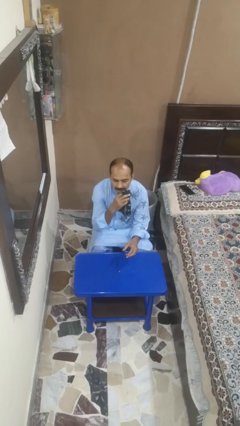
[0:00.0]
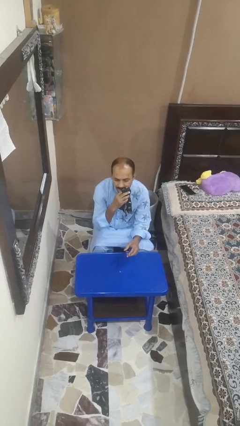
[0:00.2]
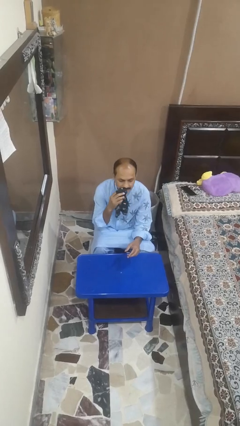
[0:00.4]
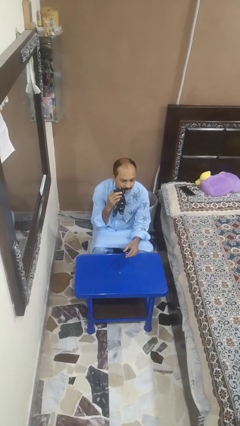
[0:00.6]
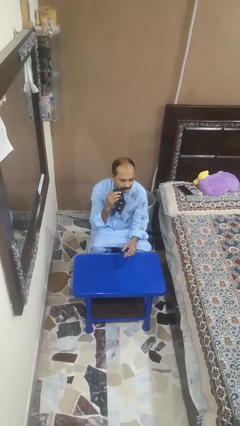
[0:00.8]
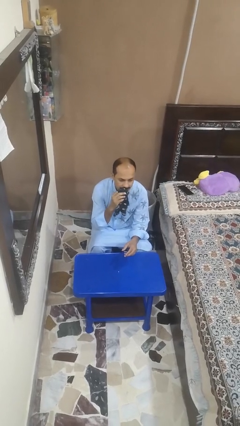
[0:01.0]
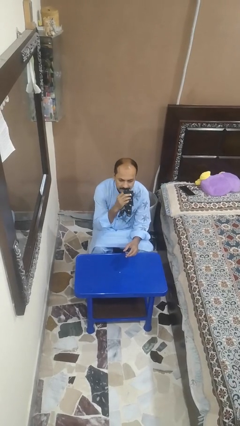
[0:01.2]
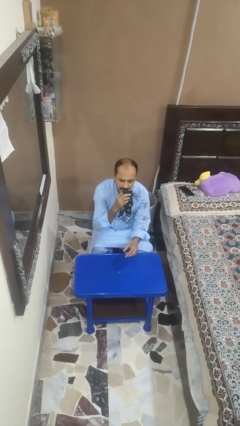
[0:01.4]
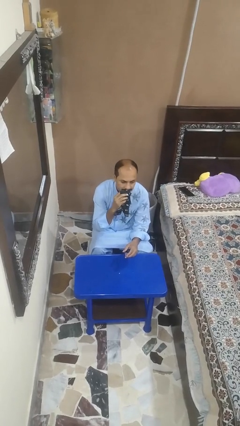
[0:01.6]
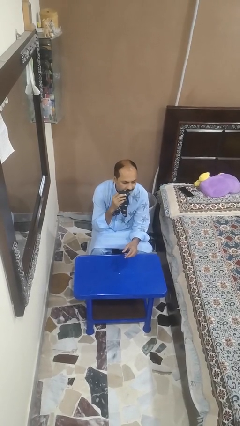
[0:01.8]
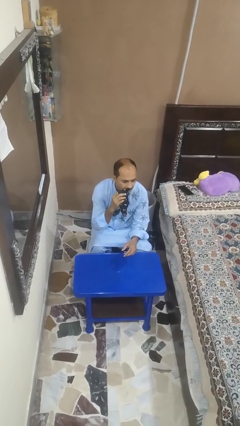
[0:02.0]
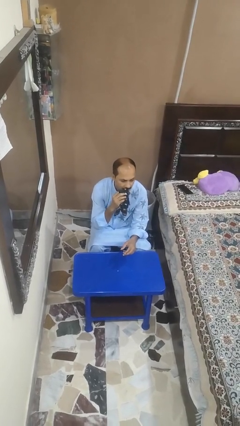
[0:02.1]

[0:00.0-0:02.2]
person wipes mouth with napkin

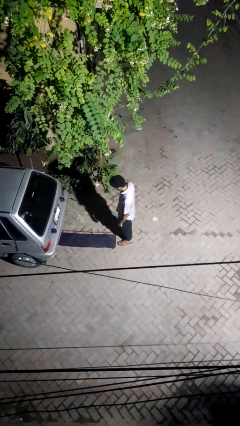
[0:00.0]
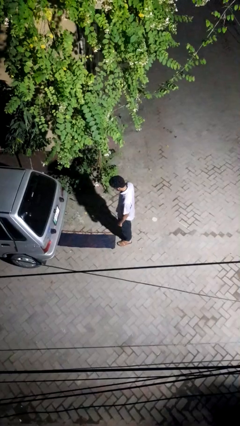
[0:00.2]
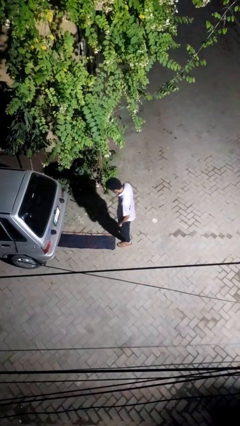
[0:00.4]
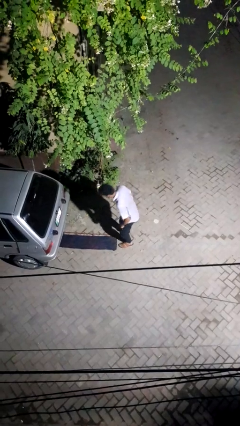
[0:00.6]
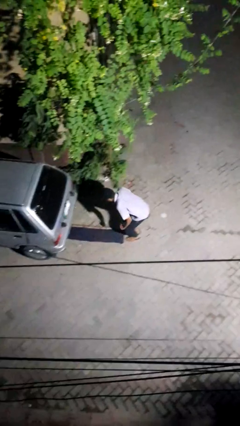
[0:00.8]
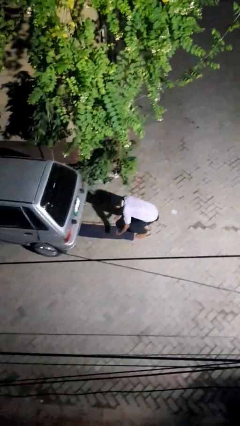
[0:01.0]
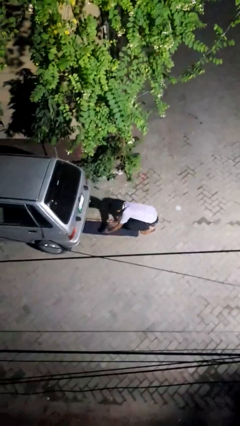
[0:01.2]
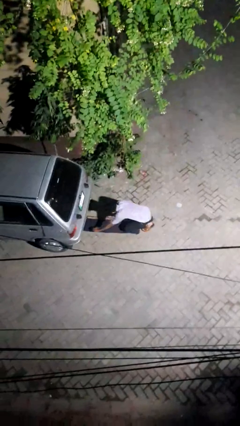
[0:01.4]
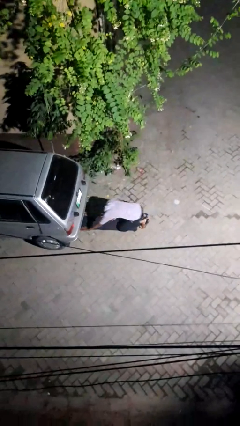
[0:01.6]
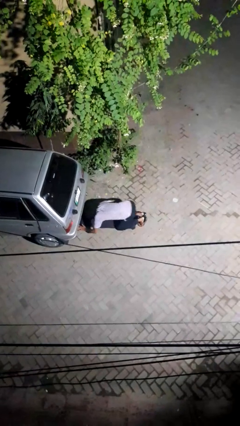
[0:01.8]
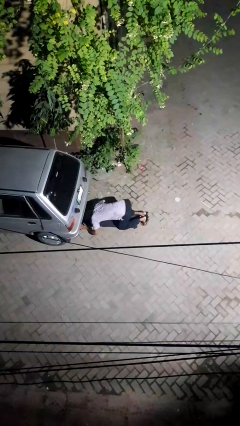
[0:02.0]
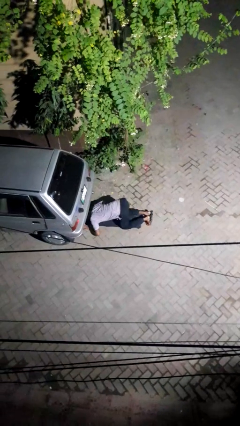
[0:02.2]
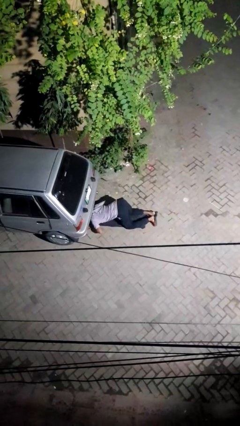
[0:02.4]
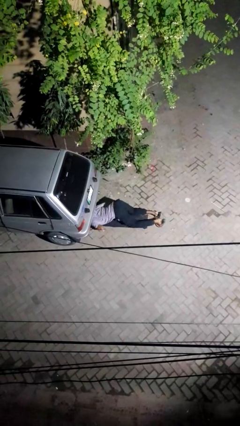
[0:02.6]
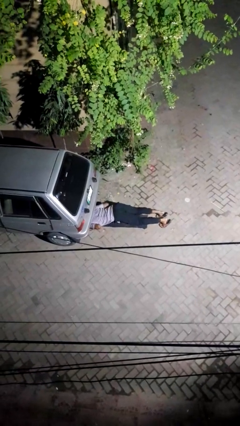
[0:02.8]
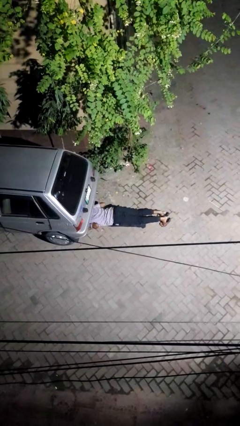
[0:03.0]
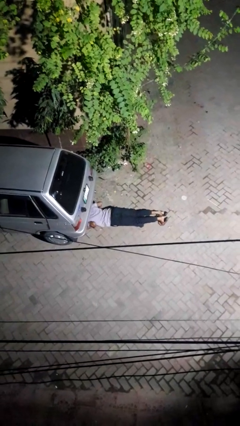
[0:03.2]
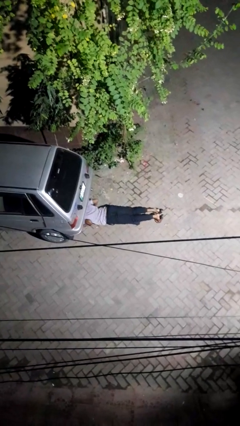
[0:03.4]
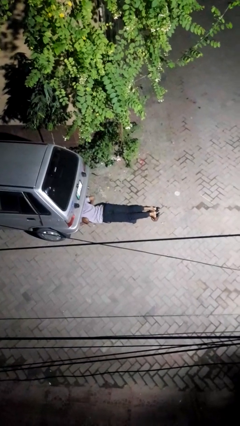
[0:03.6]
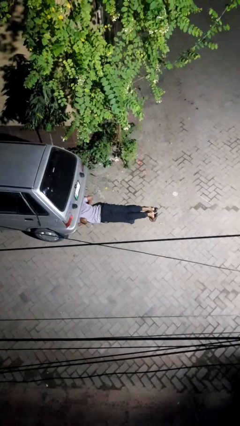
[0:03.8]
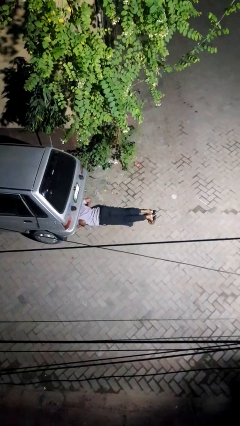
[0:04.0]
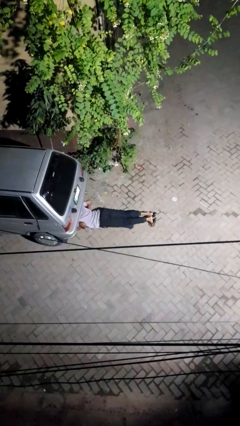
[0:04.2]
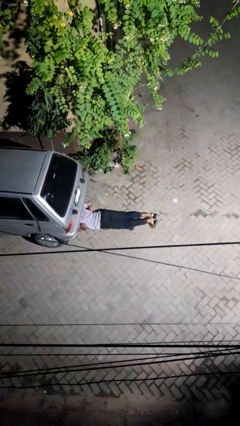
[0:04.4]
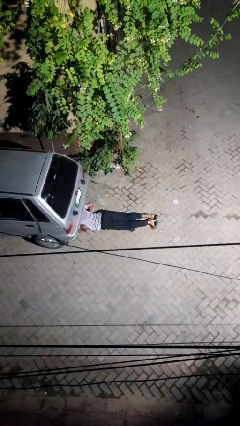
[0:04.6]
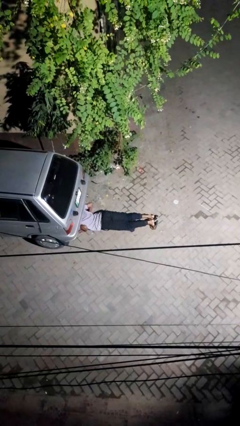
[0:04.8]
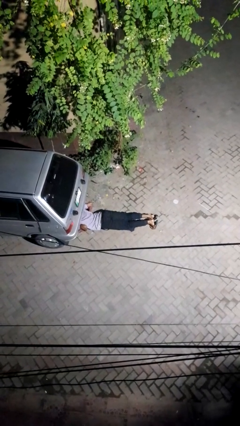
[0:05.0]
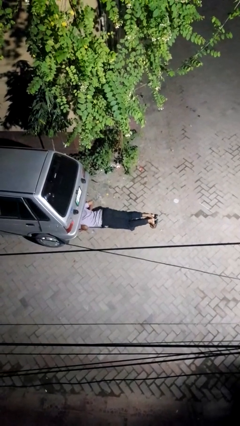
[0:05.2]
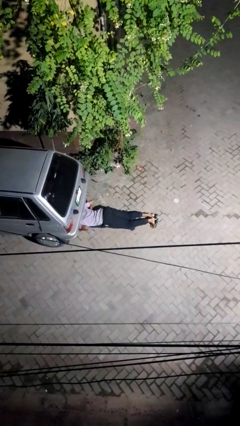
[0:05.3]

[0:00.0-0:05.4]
person crawls out from under vehicle

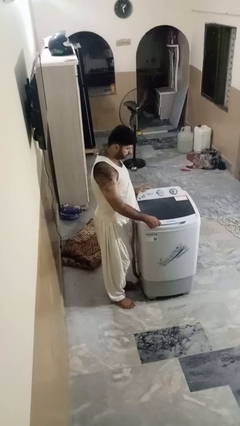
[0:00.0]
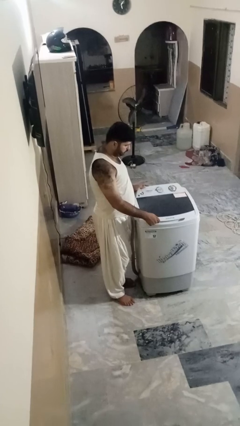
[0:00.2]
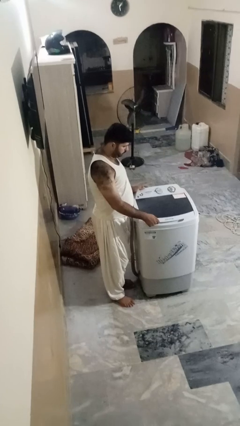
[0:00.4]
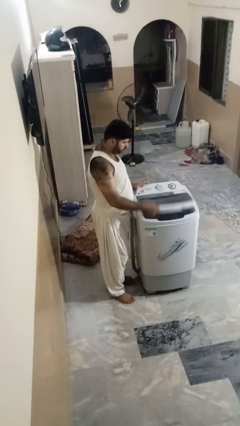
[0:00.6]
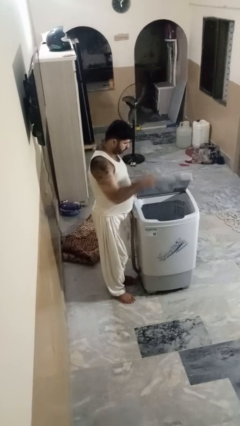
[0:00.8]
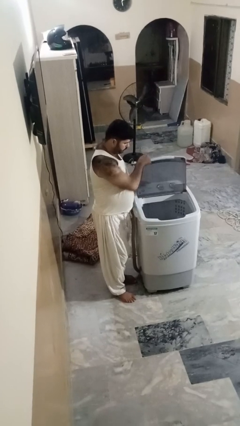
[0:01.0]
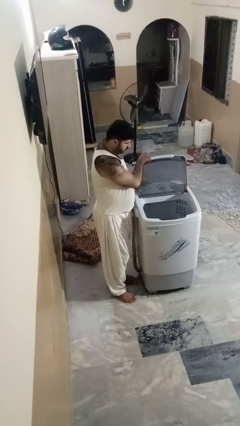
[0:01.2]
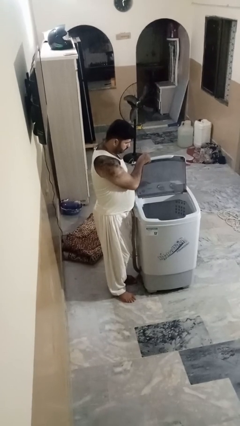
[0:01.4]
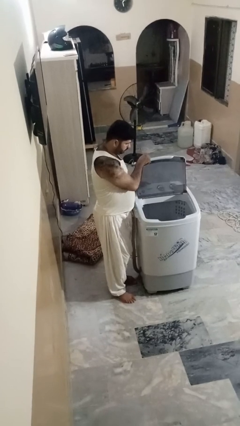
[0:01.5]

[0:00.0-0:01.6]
person opens clothes washer

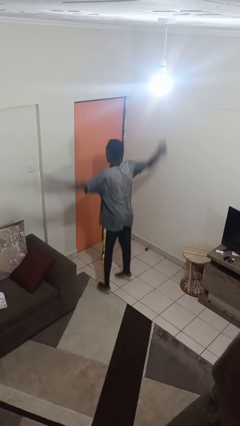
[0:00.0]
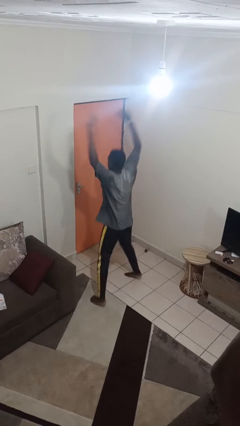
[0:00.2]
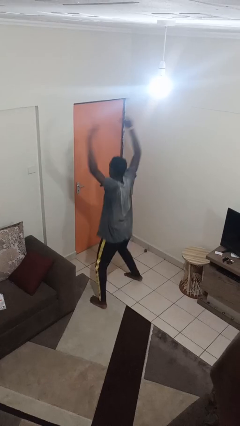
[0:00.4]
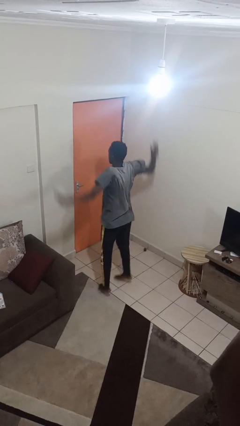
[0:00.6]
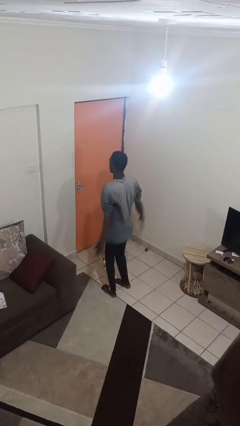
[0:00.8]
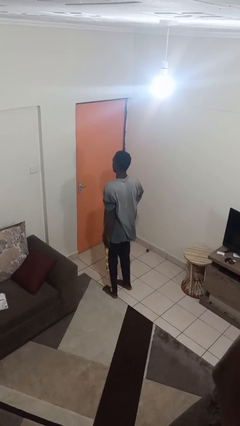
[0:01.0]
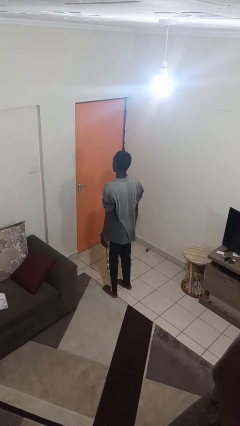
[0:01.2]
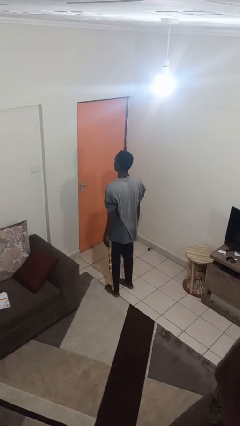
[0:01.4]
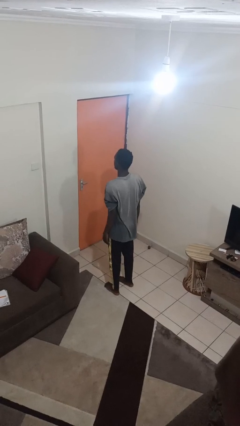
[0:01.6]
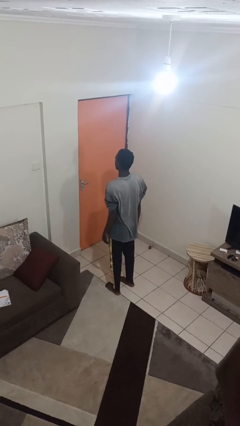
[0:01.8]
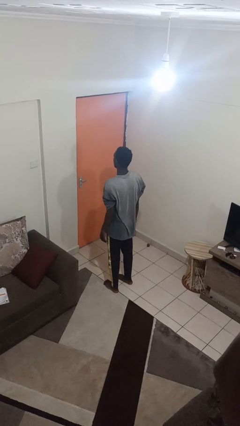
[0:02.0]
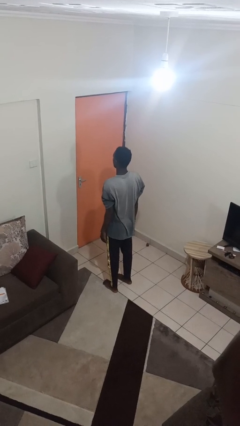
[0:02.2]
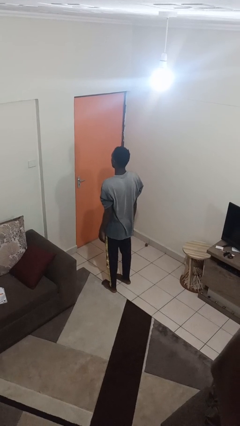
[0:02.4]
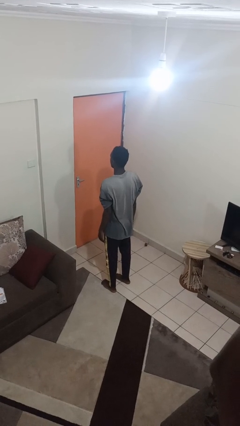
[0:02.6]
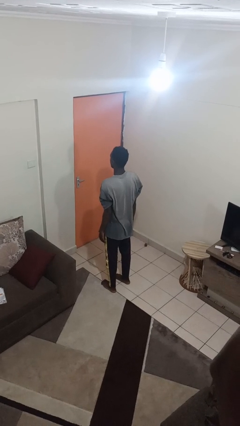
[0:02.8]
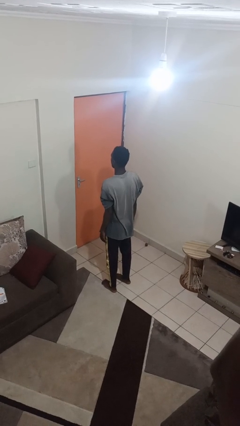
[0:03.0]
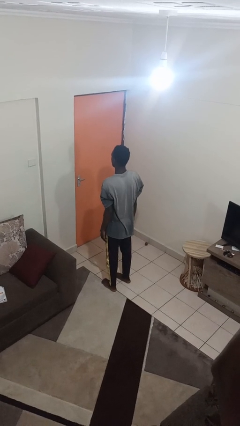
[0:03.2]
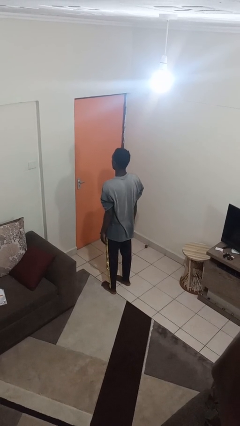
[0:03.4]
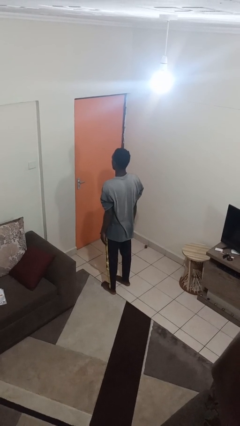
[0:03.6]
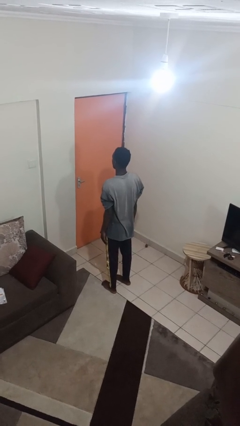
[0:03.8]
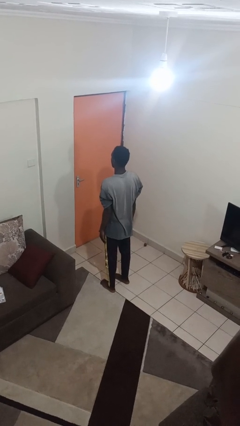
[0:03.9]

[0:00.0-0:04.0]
person exercises with jumping jacks

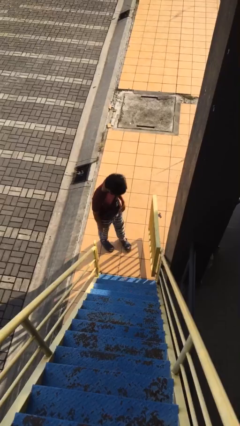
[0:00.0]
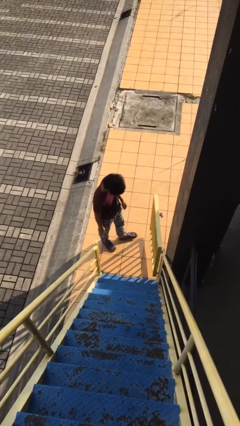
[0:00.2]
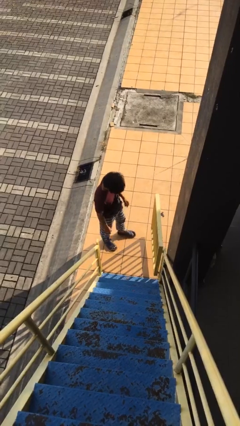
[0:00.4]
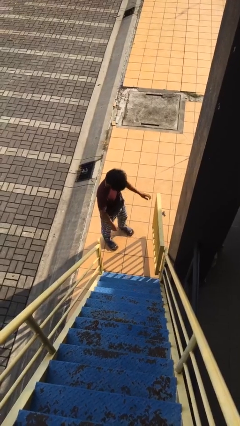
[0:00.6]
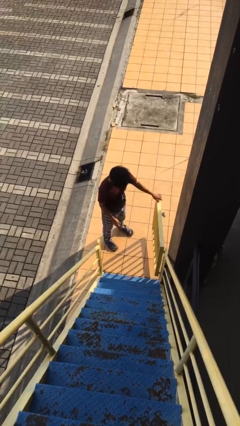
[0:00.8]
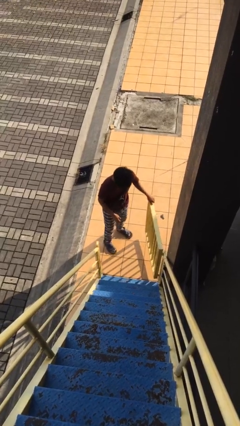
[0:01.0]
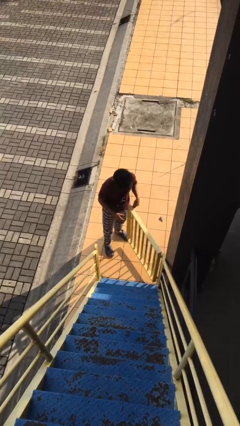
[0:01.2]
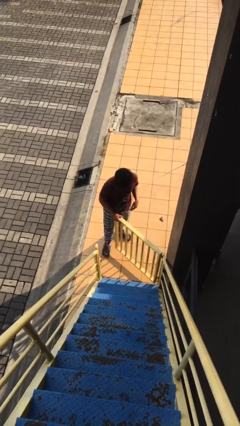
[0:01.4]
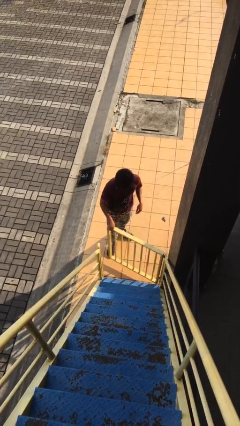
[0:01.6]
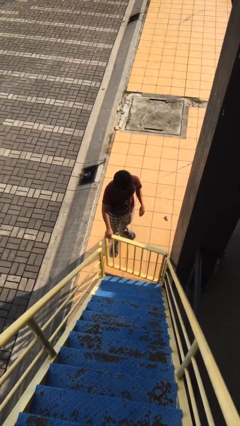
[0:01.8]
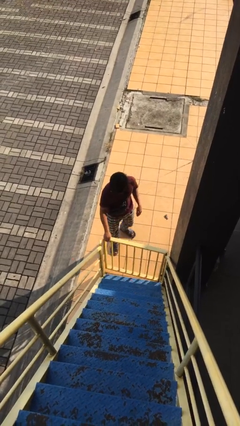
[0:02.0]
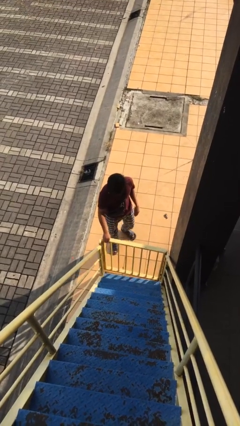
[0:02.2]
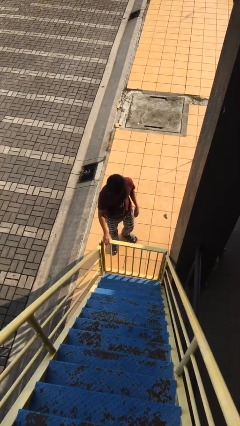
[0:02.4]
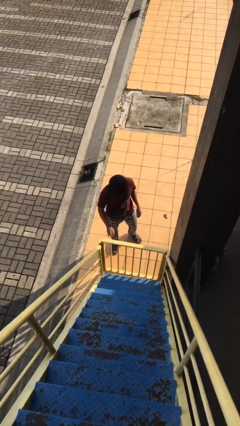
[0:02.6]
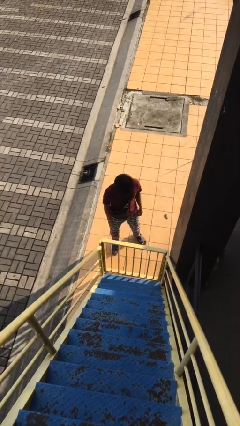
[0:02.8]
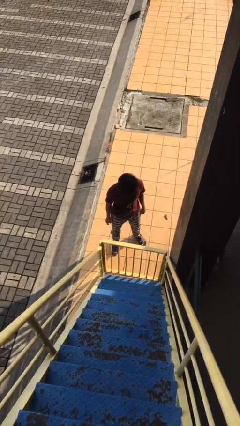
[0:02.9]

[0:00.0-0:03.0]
person closes facility door

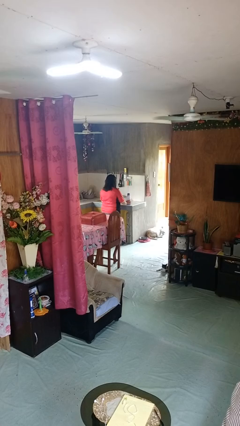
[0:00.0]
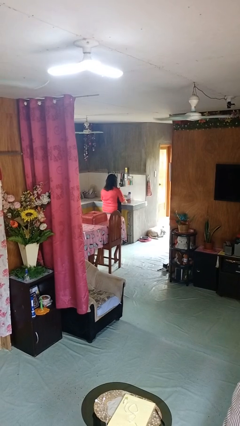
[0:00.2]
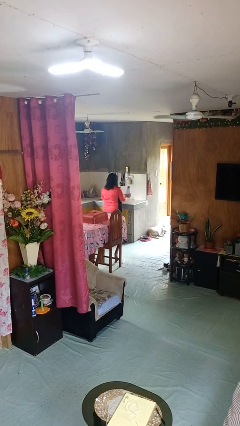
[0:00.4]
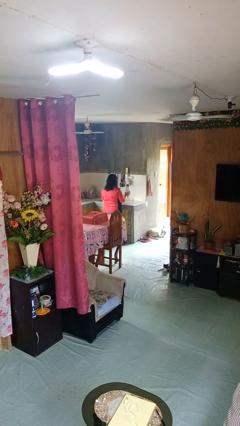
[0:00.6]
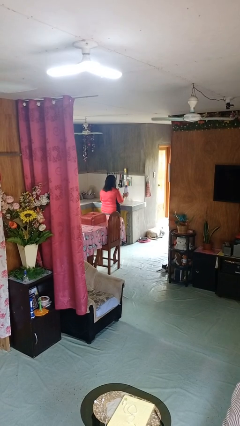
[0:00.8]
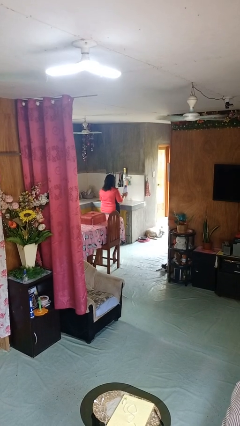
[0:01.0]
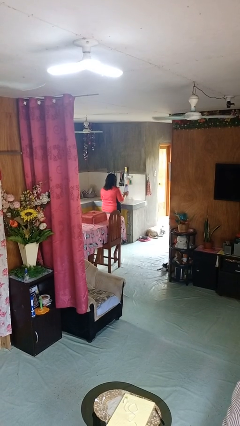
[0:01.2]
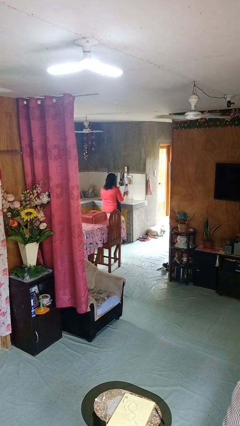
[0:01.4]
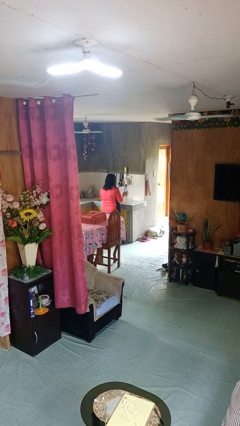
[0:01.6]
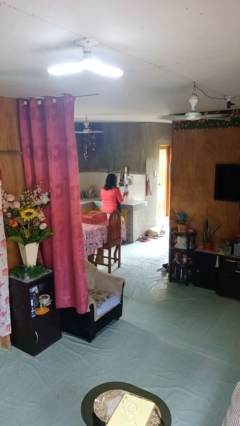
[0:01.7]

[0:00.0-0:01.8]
person picks up object from countertop
